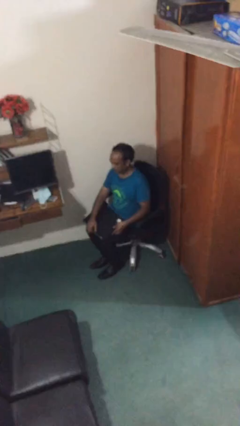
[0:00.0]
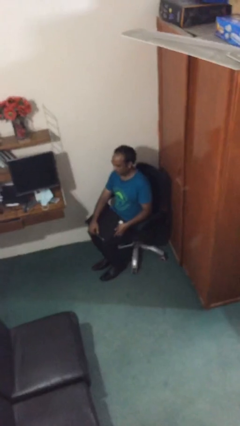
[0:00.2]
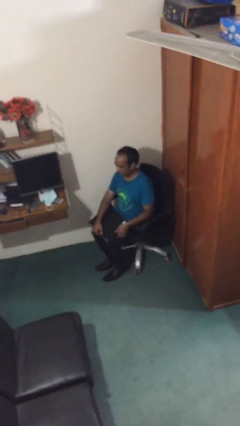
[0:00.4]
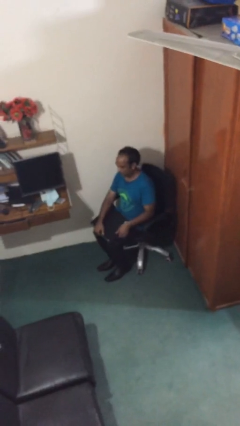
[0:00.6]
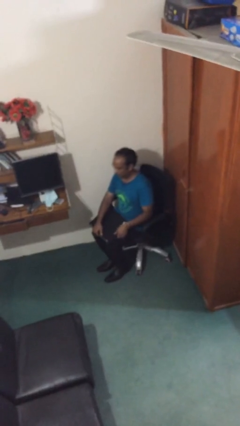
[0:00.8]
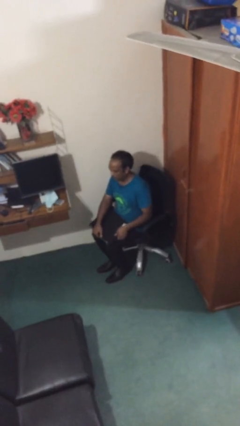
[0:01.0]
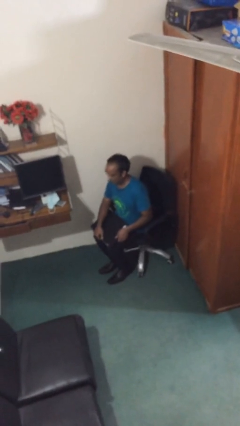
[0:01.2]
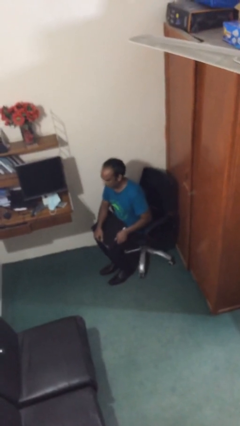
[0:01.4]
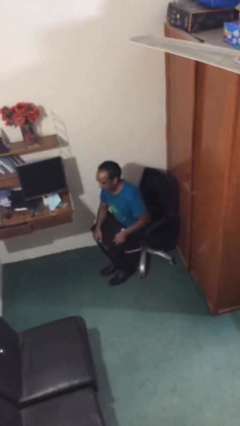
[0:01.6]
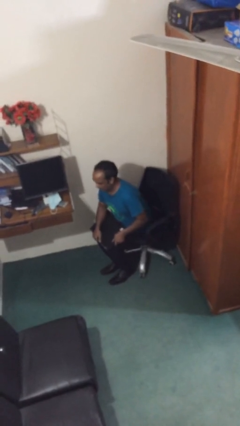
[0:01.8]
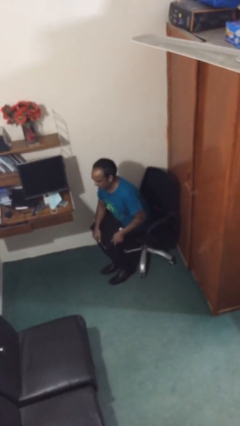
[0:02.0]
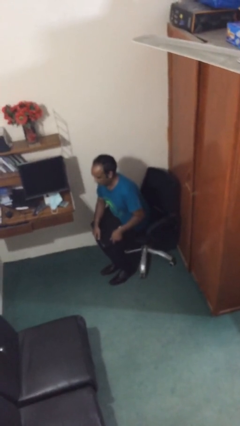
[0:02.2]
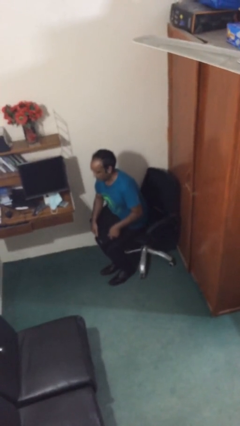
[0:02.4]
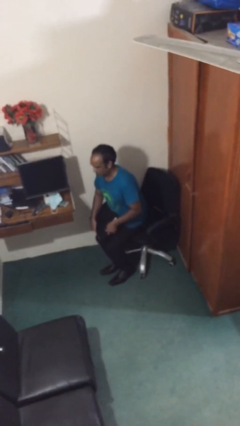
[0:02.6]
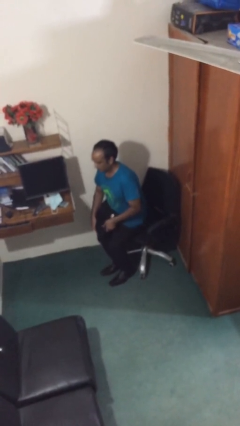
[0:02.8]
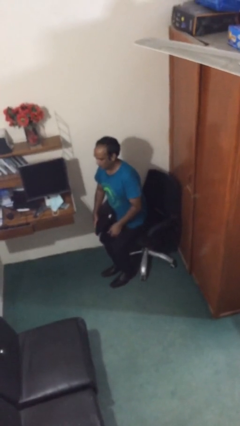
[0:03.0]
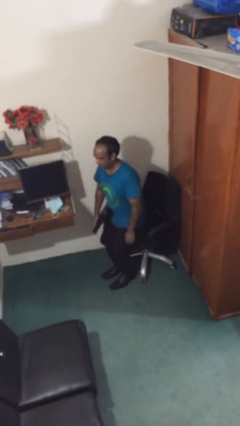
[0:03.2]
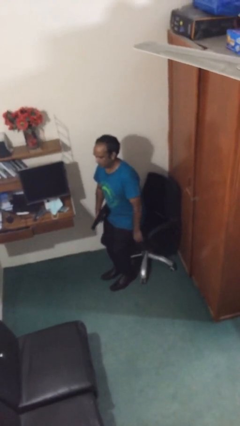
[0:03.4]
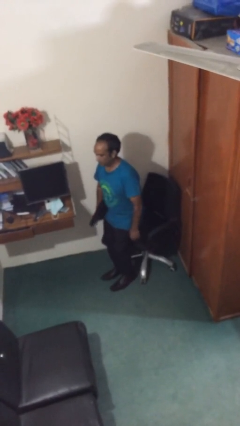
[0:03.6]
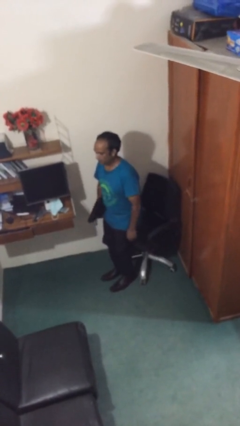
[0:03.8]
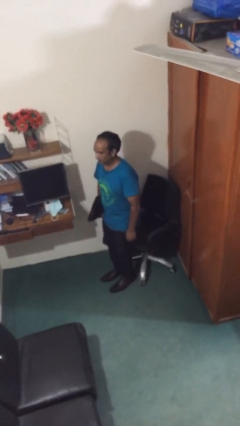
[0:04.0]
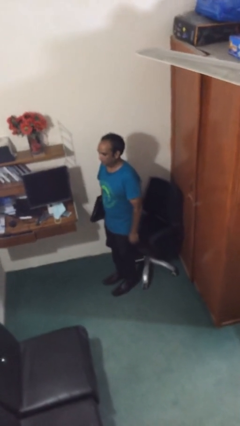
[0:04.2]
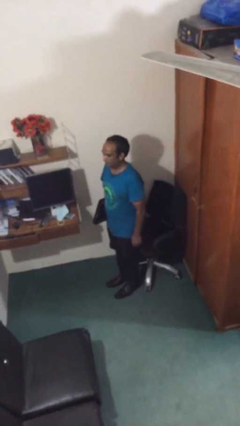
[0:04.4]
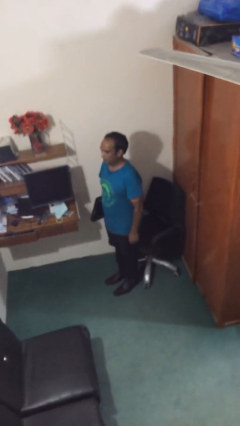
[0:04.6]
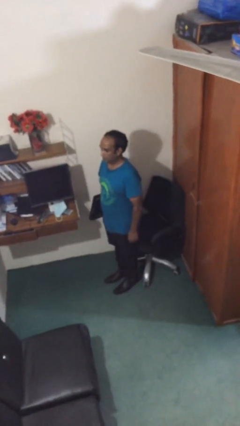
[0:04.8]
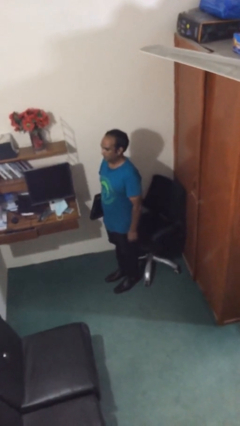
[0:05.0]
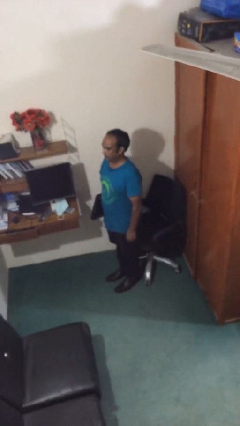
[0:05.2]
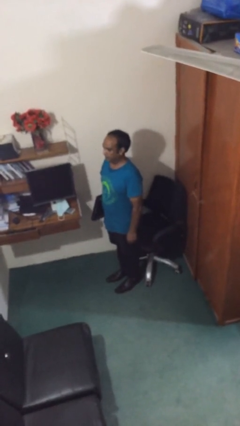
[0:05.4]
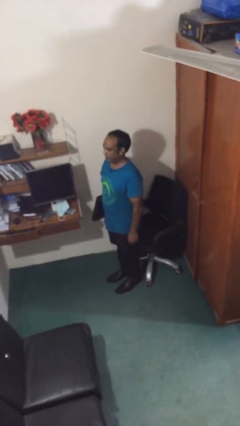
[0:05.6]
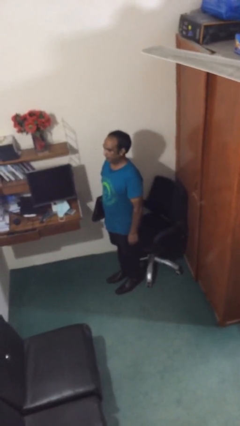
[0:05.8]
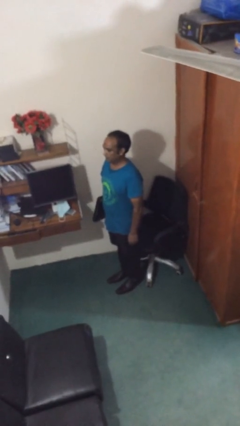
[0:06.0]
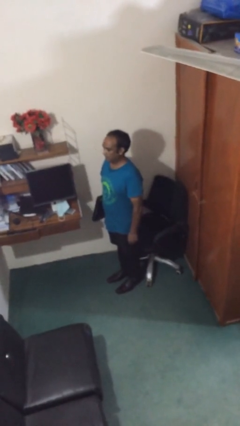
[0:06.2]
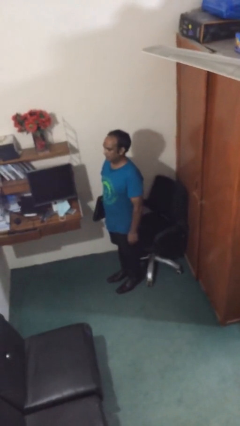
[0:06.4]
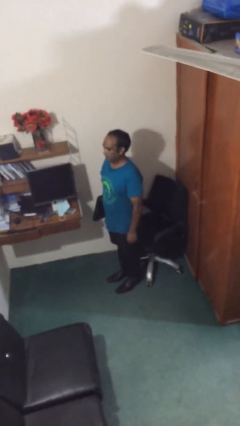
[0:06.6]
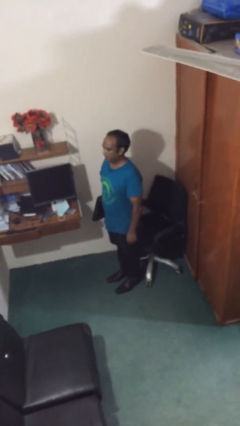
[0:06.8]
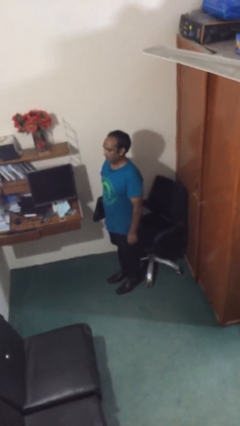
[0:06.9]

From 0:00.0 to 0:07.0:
person stands up

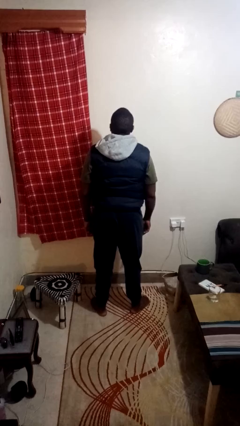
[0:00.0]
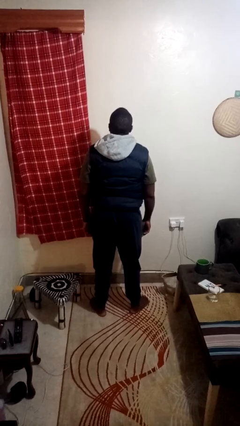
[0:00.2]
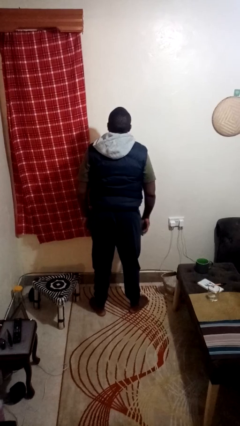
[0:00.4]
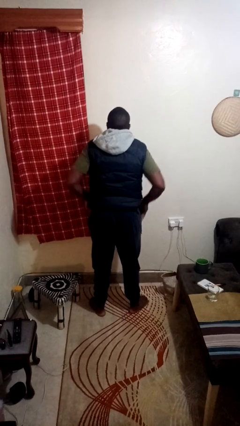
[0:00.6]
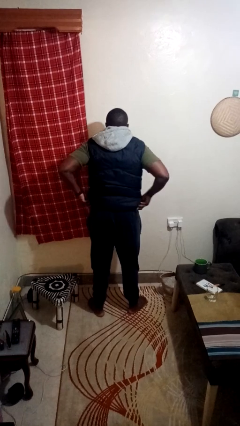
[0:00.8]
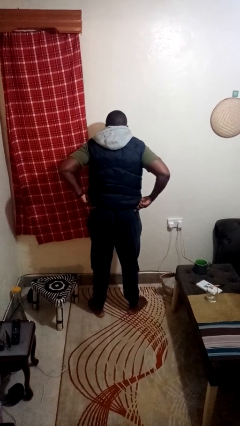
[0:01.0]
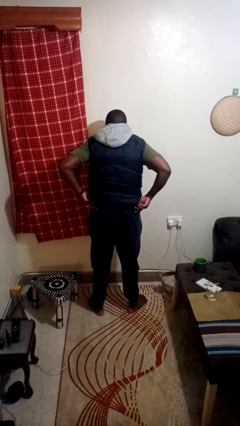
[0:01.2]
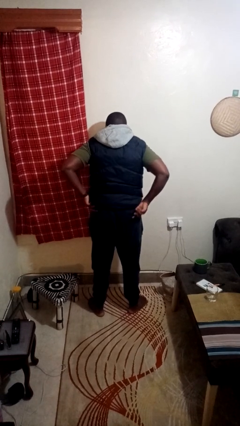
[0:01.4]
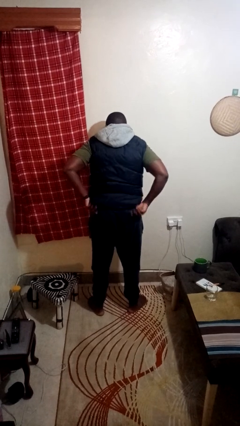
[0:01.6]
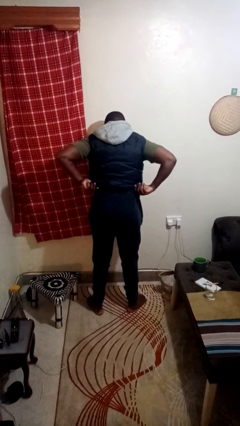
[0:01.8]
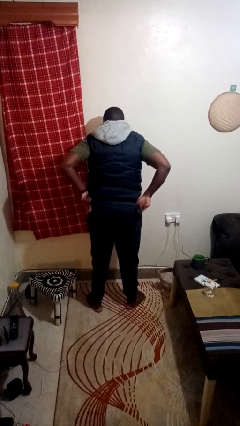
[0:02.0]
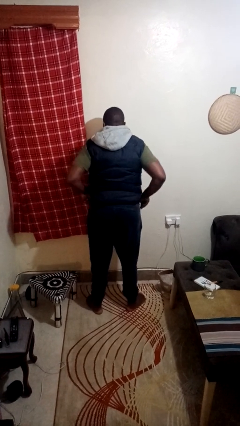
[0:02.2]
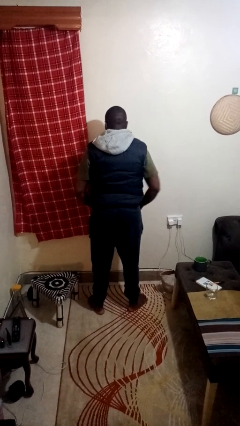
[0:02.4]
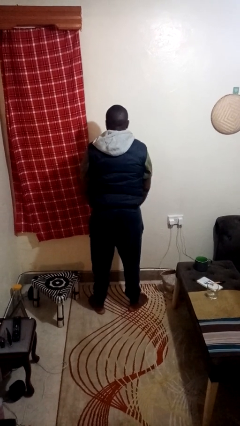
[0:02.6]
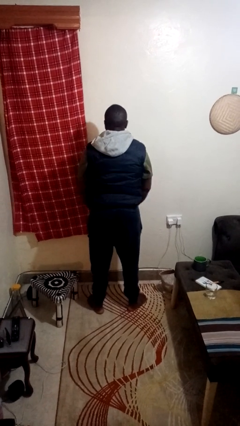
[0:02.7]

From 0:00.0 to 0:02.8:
person hikes up pants

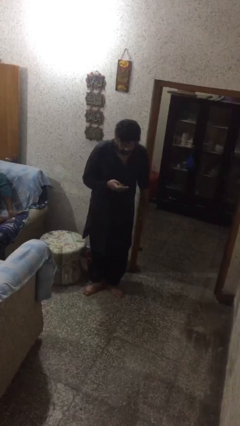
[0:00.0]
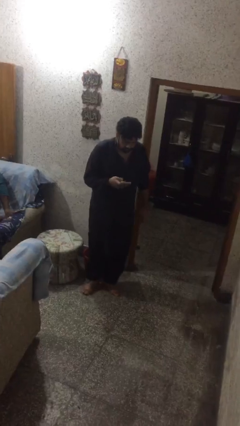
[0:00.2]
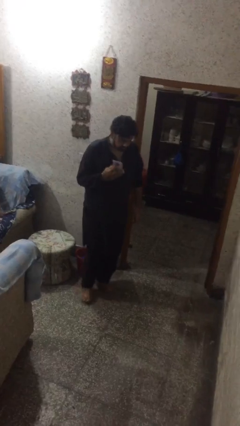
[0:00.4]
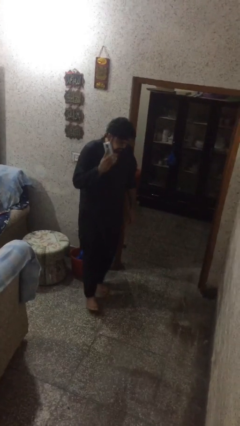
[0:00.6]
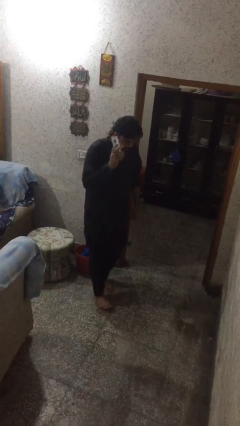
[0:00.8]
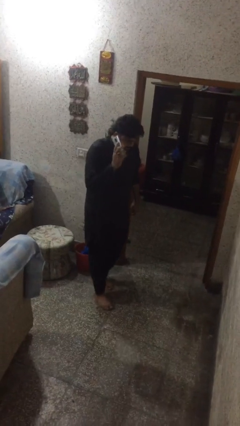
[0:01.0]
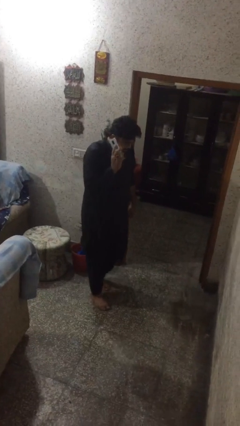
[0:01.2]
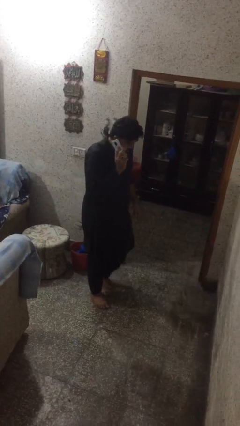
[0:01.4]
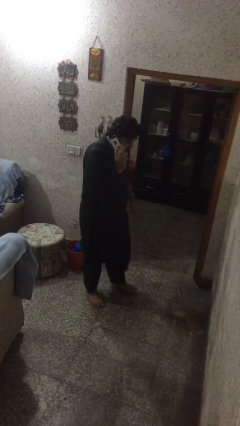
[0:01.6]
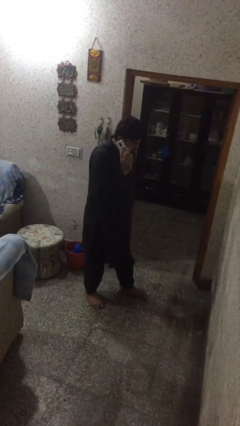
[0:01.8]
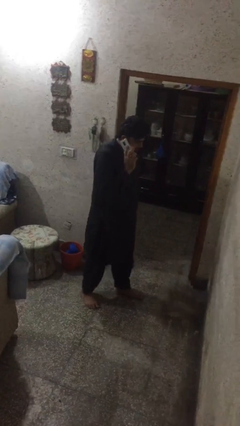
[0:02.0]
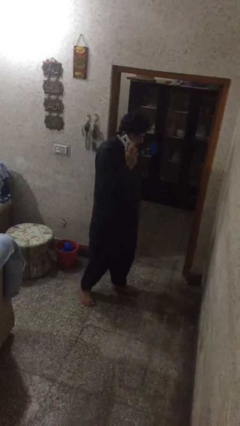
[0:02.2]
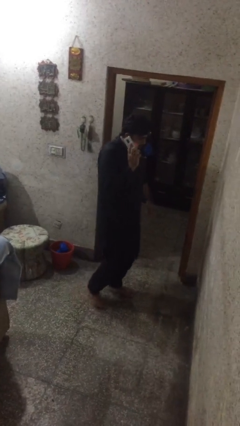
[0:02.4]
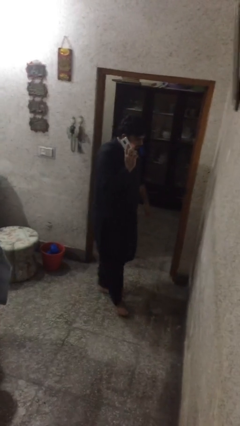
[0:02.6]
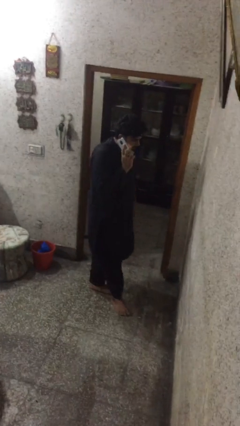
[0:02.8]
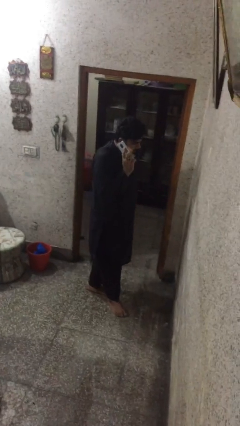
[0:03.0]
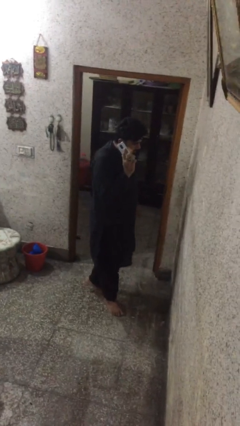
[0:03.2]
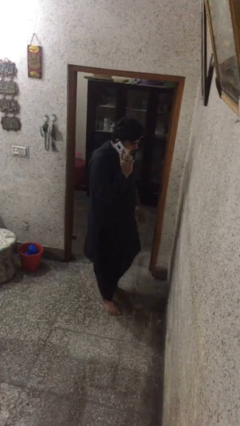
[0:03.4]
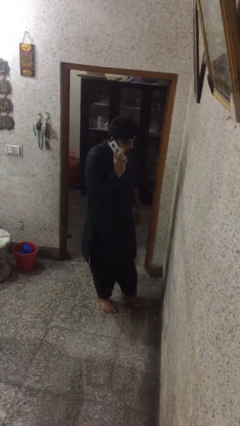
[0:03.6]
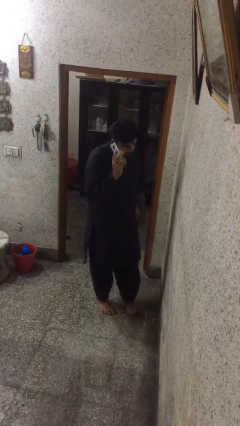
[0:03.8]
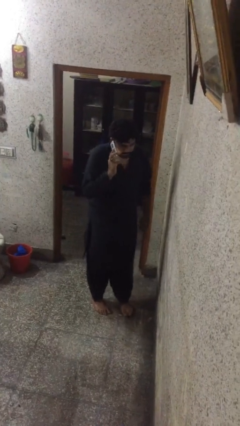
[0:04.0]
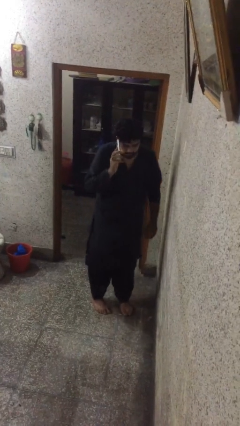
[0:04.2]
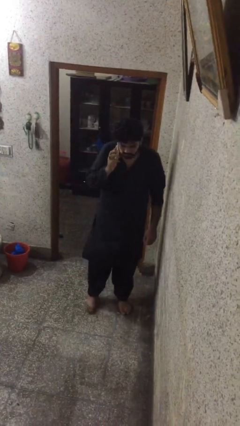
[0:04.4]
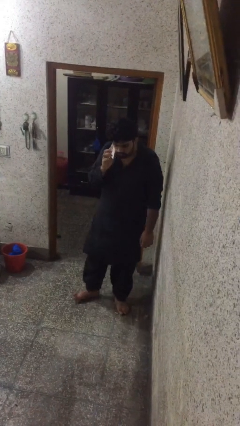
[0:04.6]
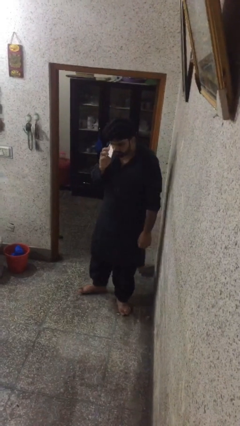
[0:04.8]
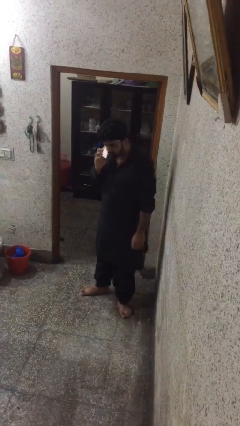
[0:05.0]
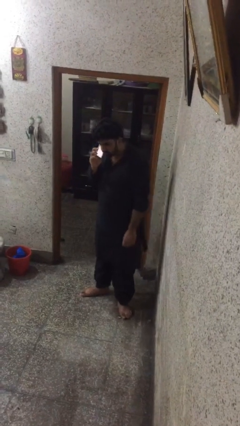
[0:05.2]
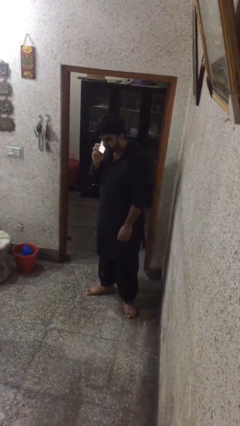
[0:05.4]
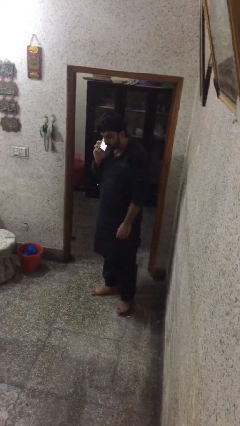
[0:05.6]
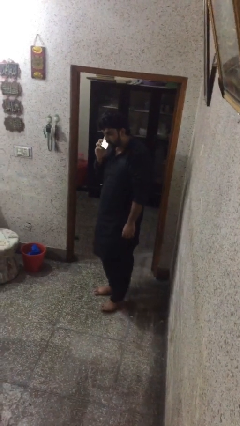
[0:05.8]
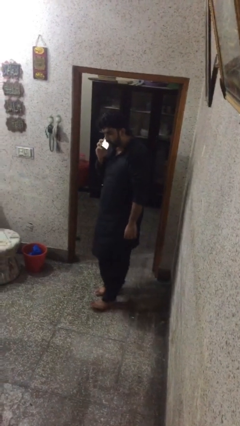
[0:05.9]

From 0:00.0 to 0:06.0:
person talks on phone

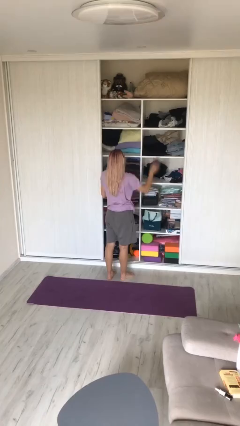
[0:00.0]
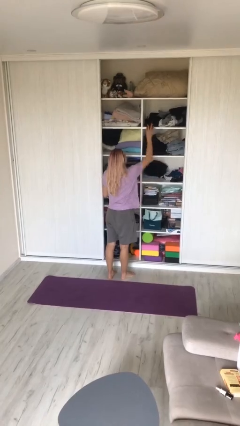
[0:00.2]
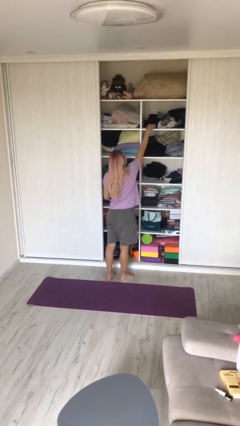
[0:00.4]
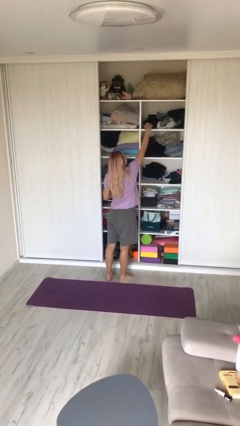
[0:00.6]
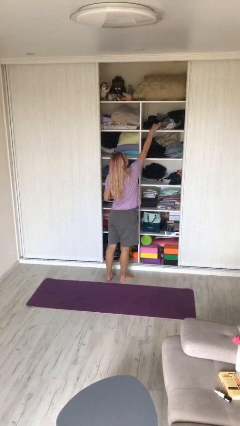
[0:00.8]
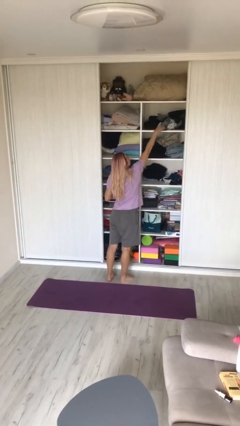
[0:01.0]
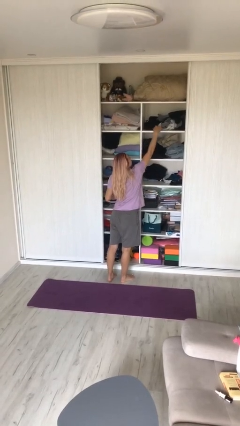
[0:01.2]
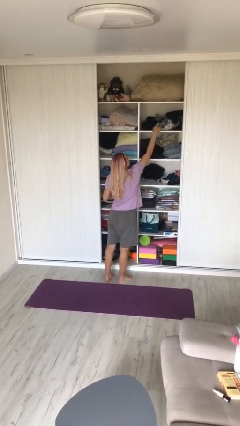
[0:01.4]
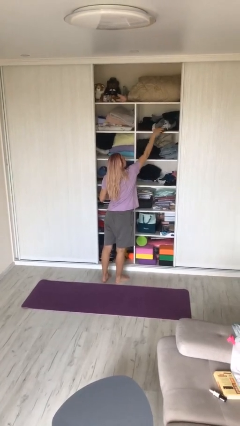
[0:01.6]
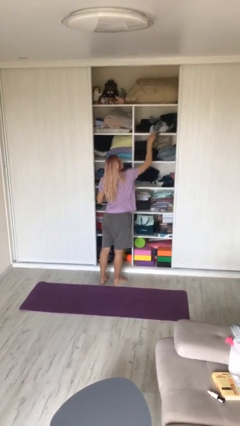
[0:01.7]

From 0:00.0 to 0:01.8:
person dusts furniture
